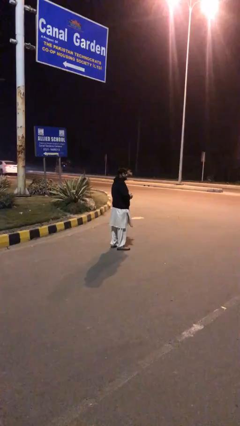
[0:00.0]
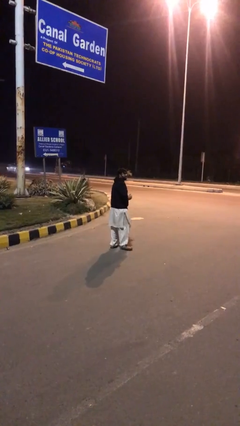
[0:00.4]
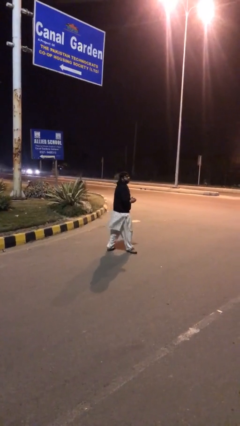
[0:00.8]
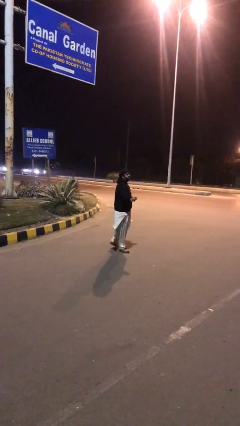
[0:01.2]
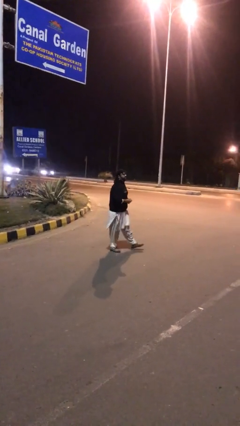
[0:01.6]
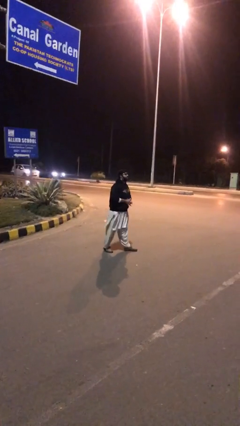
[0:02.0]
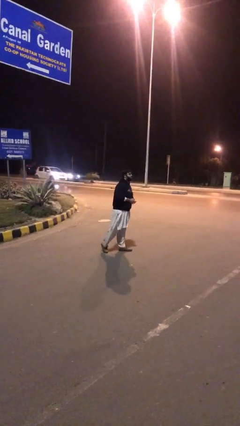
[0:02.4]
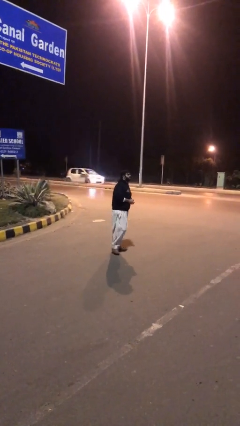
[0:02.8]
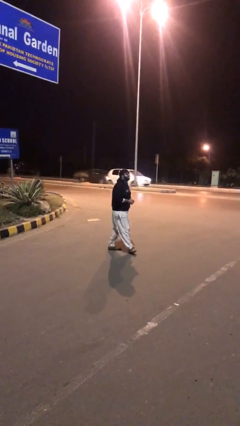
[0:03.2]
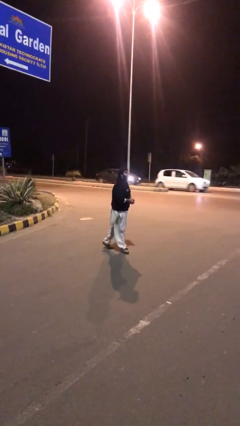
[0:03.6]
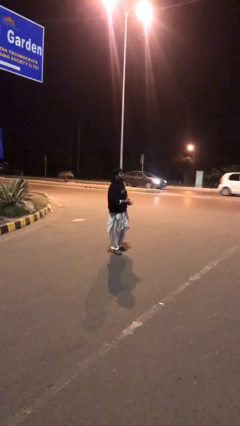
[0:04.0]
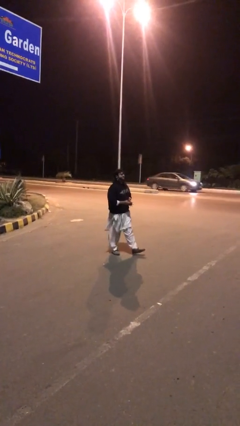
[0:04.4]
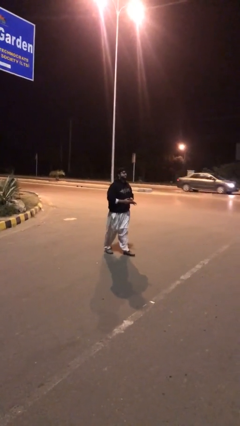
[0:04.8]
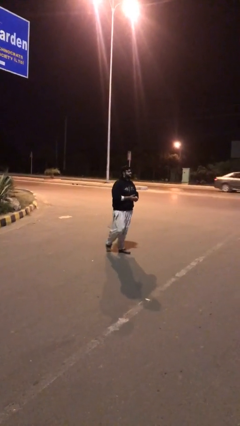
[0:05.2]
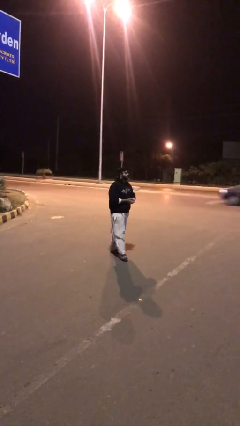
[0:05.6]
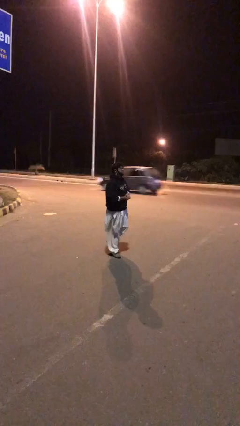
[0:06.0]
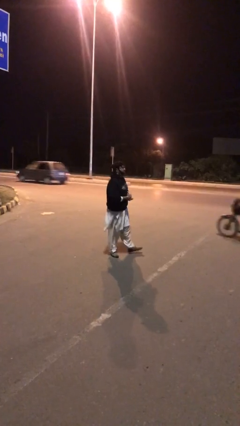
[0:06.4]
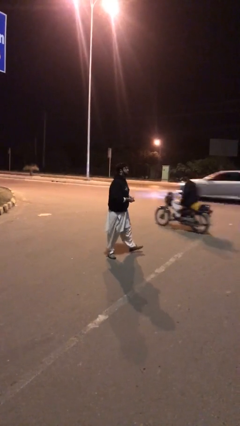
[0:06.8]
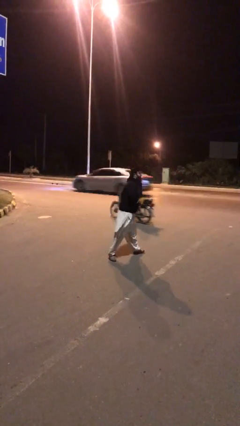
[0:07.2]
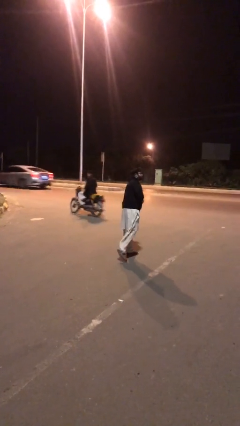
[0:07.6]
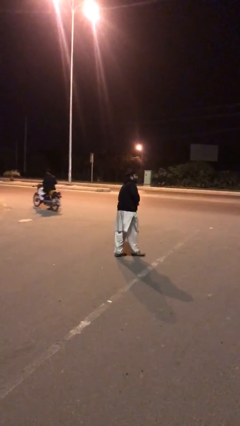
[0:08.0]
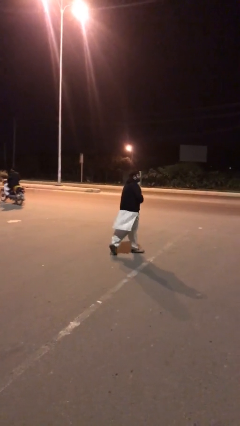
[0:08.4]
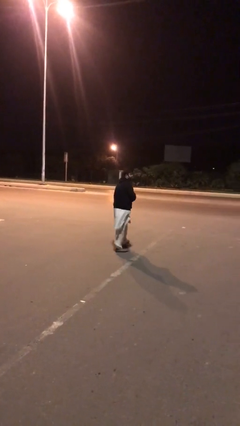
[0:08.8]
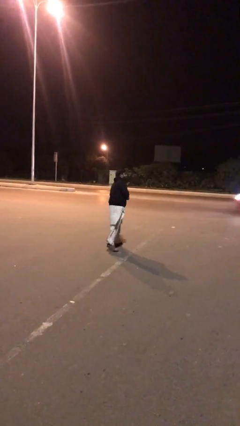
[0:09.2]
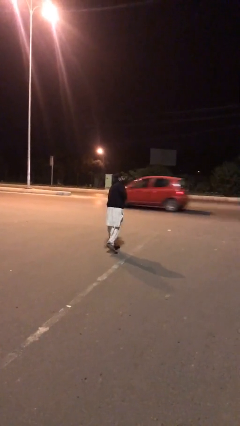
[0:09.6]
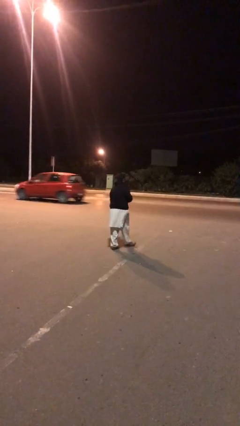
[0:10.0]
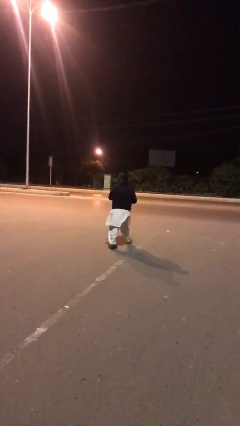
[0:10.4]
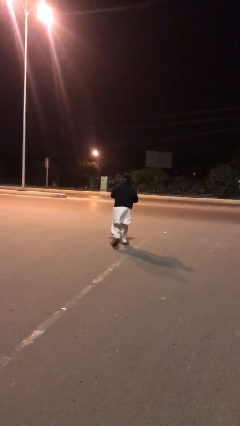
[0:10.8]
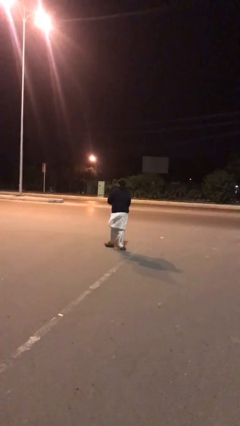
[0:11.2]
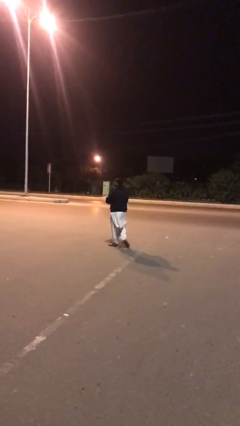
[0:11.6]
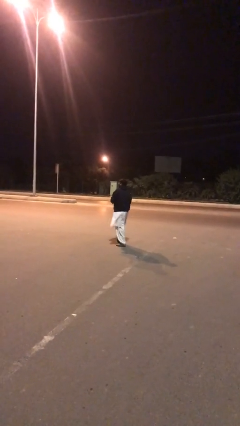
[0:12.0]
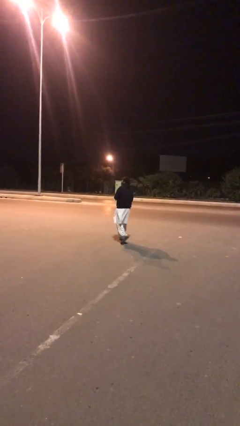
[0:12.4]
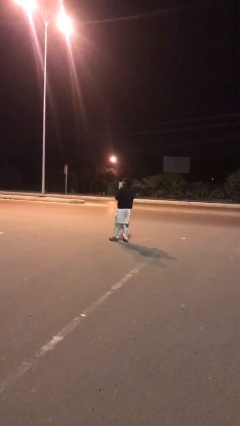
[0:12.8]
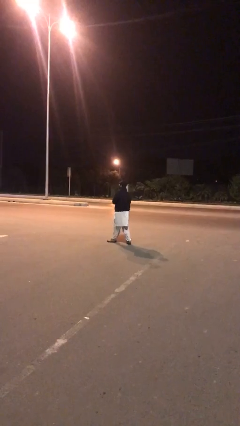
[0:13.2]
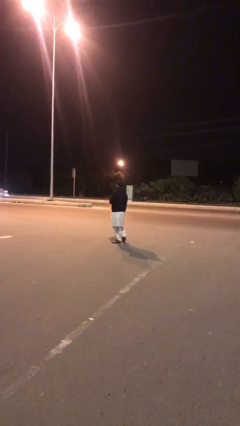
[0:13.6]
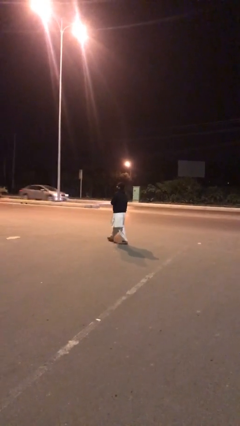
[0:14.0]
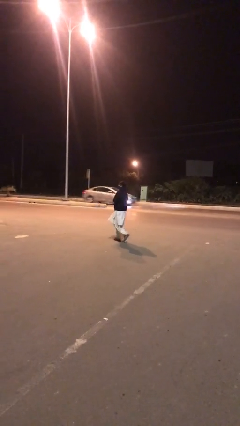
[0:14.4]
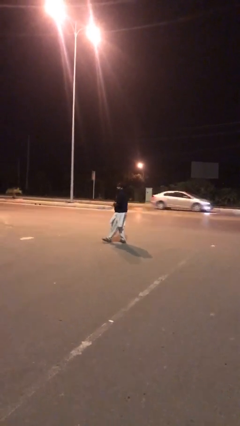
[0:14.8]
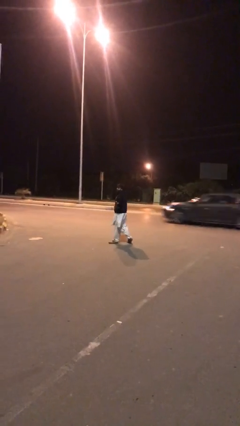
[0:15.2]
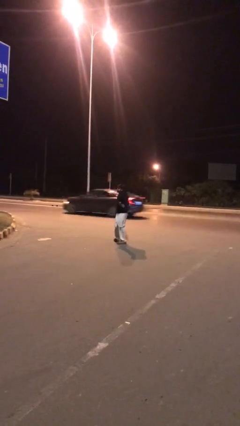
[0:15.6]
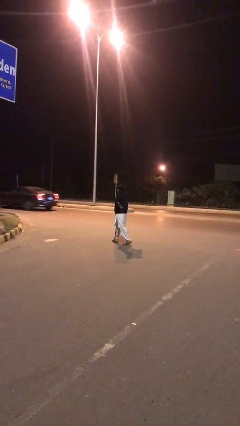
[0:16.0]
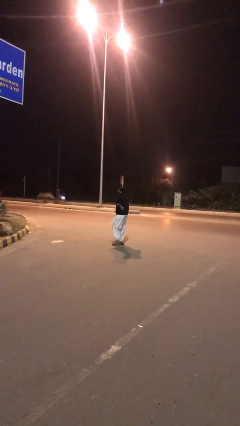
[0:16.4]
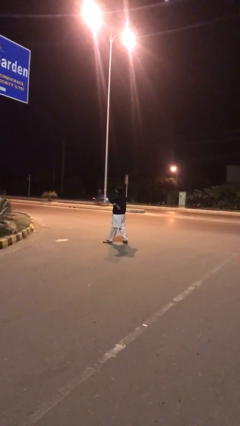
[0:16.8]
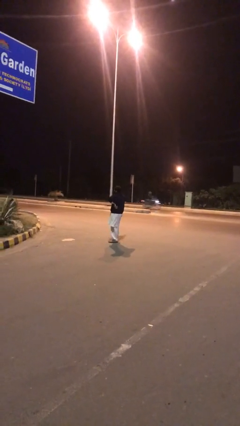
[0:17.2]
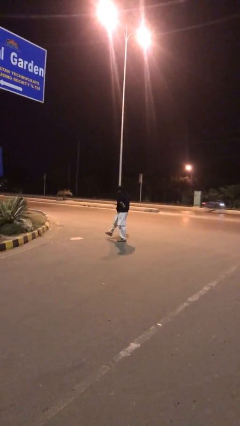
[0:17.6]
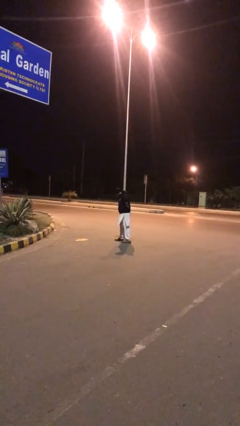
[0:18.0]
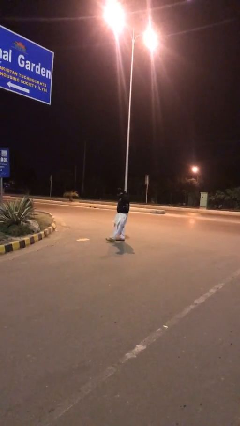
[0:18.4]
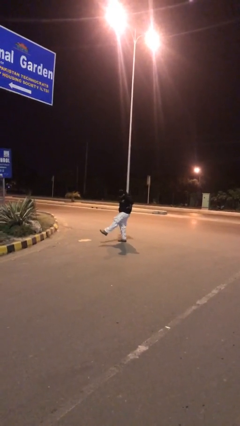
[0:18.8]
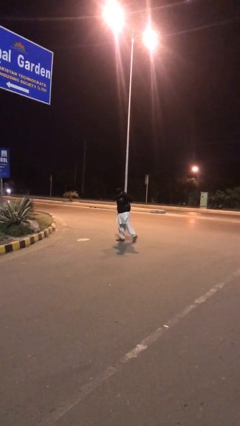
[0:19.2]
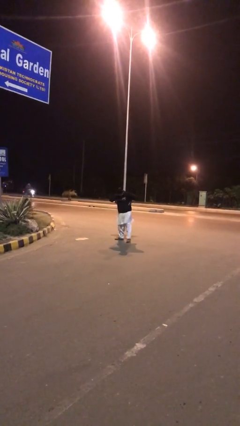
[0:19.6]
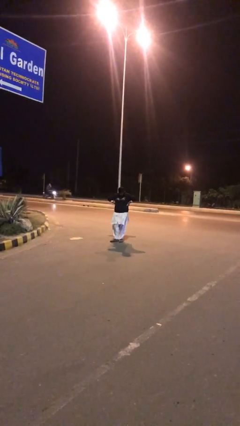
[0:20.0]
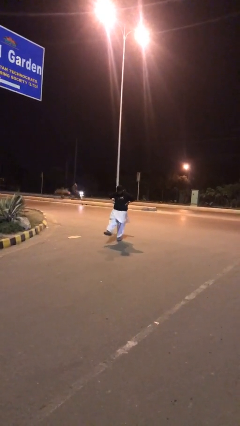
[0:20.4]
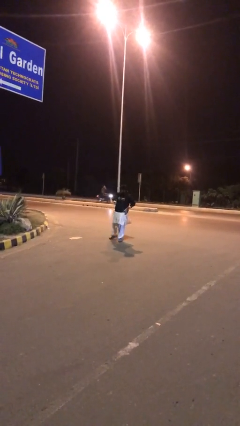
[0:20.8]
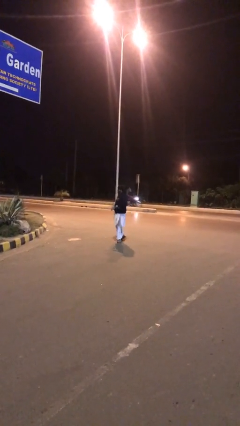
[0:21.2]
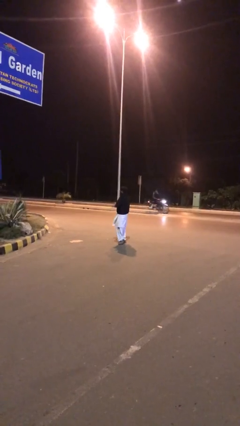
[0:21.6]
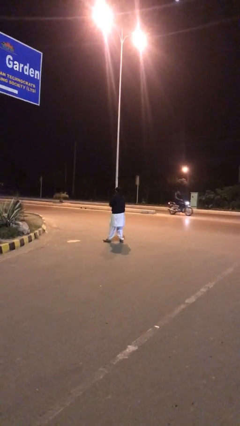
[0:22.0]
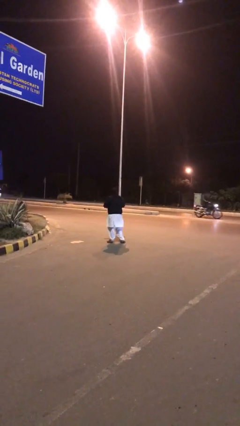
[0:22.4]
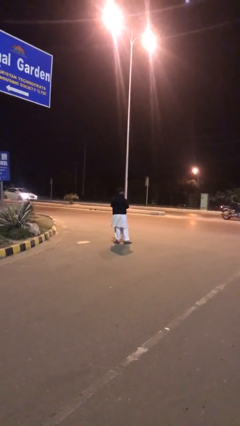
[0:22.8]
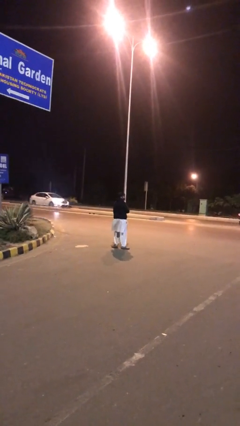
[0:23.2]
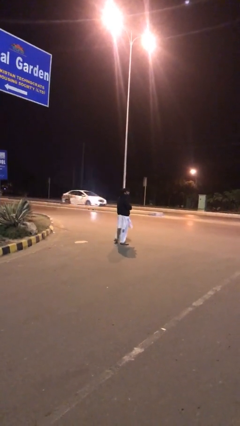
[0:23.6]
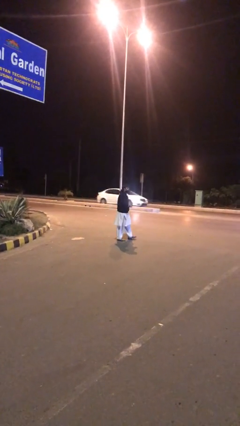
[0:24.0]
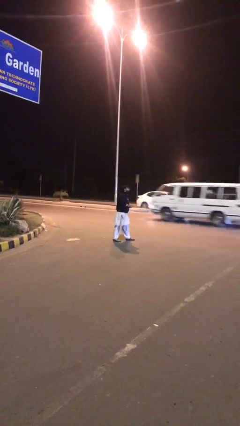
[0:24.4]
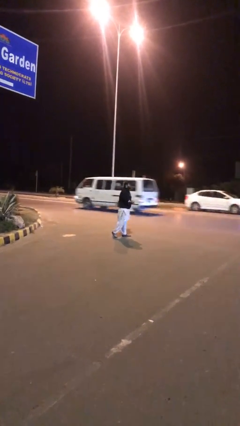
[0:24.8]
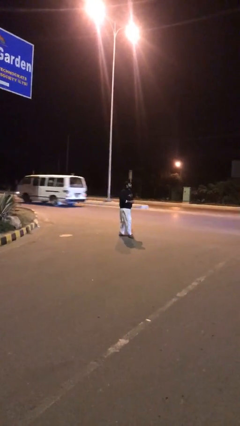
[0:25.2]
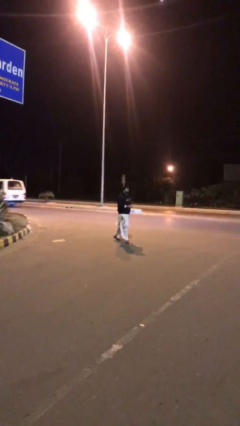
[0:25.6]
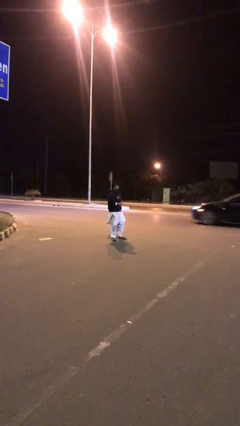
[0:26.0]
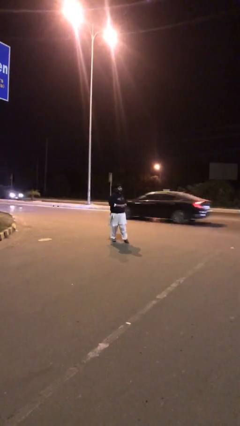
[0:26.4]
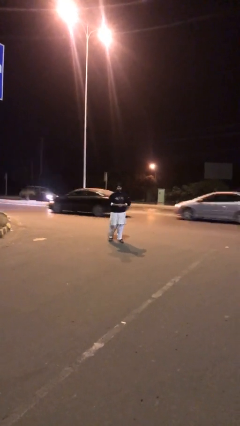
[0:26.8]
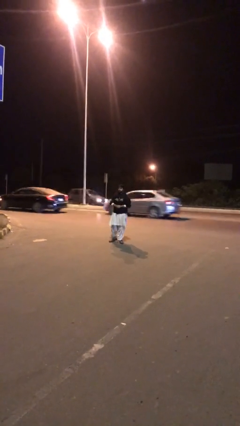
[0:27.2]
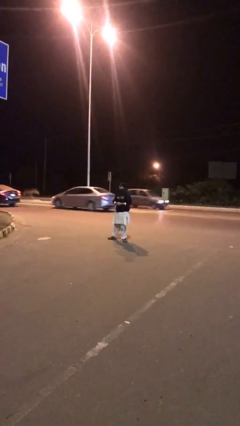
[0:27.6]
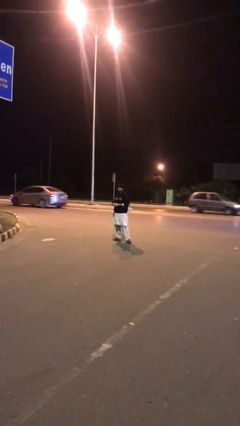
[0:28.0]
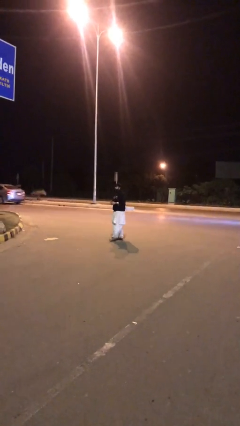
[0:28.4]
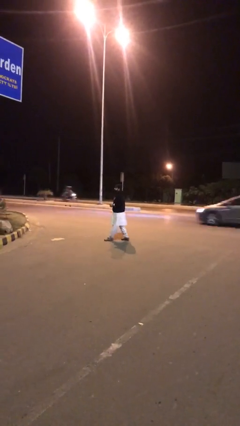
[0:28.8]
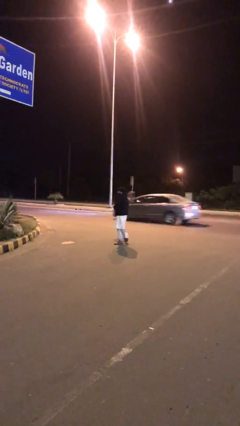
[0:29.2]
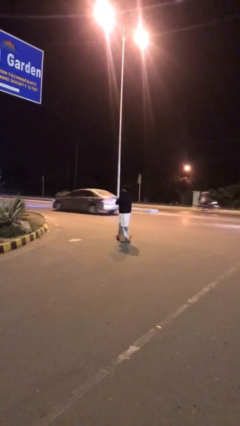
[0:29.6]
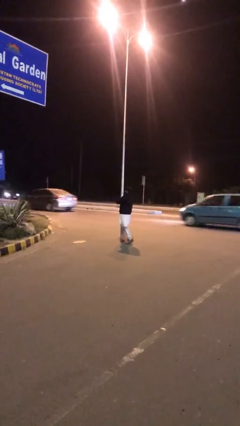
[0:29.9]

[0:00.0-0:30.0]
person walks

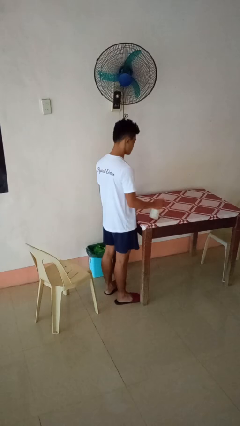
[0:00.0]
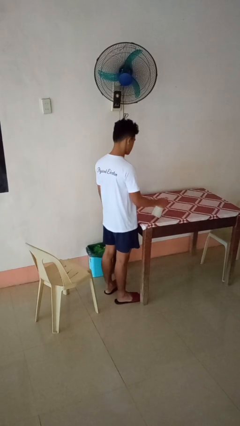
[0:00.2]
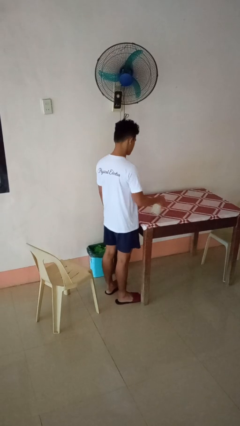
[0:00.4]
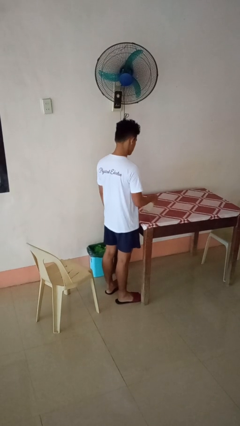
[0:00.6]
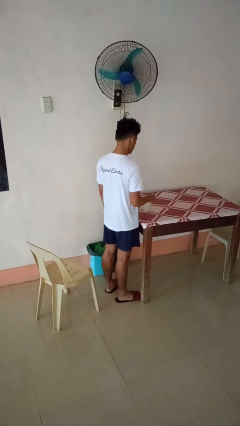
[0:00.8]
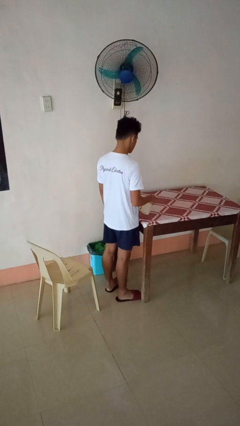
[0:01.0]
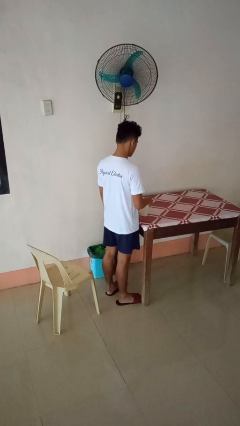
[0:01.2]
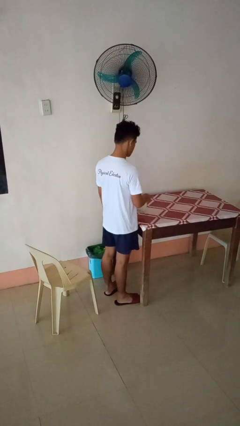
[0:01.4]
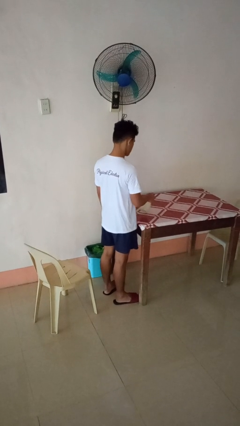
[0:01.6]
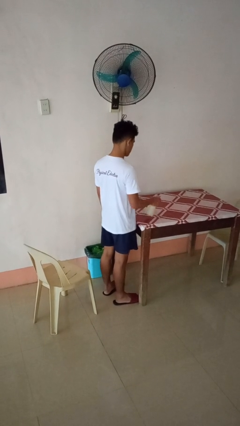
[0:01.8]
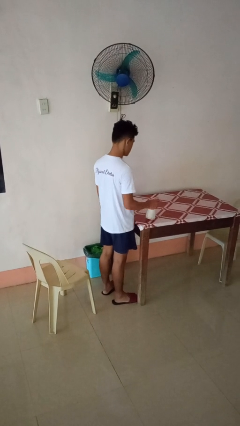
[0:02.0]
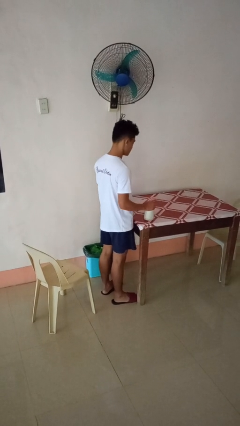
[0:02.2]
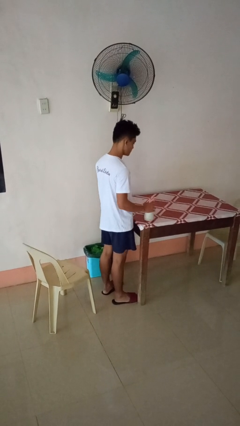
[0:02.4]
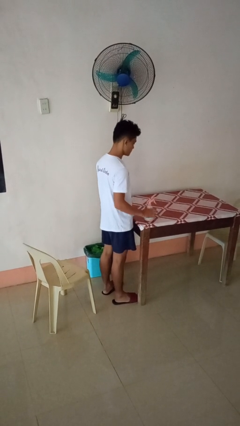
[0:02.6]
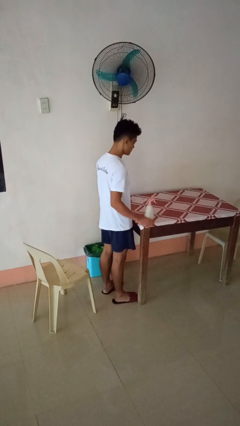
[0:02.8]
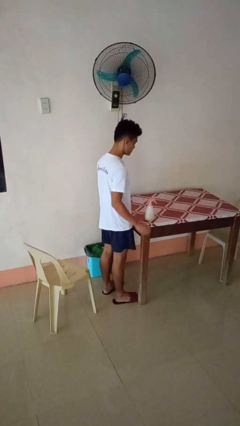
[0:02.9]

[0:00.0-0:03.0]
person sprays from bottle

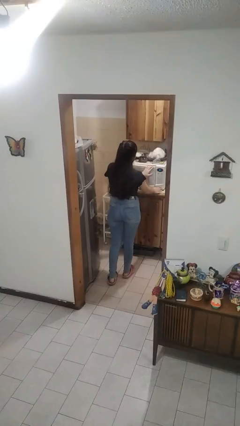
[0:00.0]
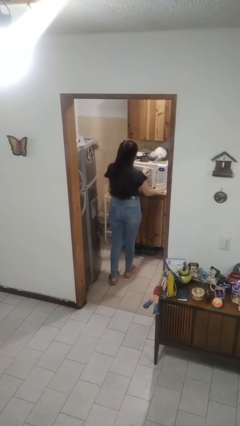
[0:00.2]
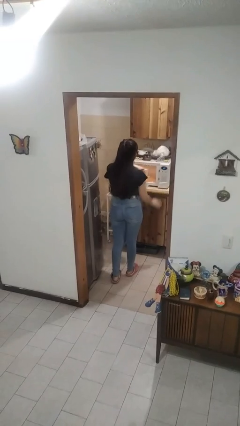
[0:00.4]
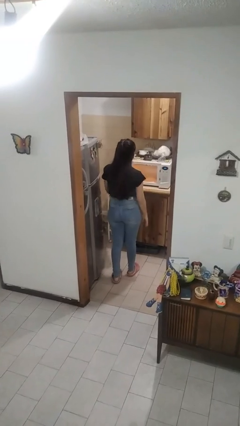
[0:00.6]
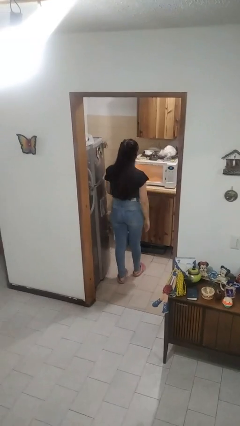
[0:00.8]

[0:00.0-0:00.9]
person opens microwave
